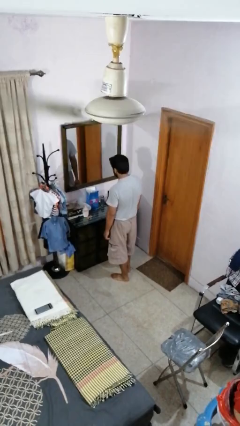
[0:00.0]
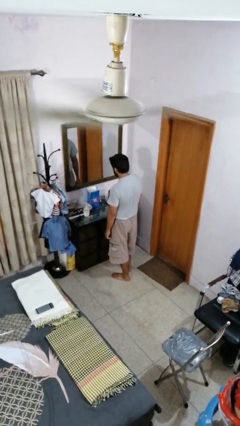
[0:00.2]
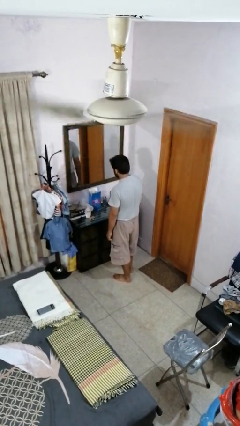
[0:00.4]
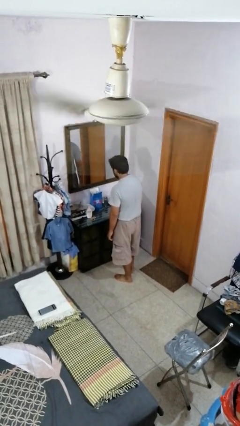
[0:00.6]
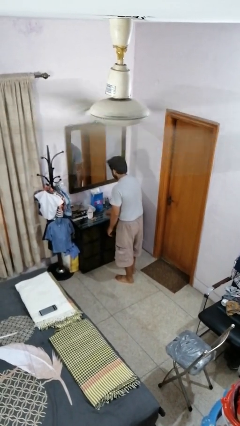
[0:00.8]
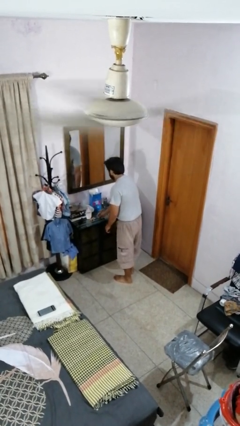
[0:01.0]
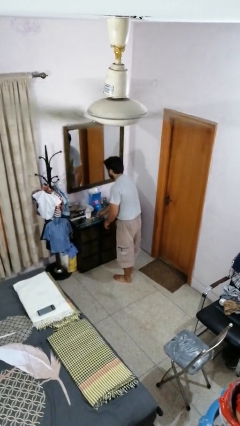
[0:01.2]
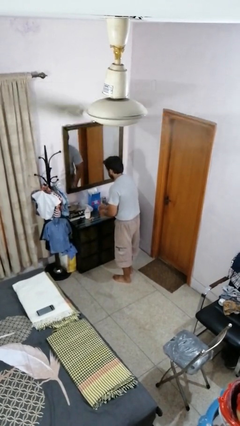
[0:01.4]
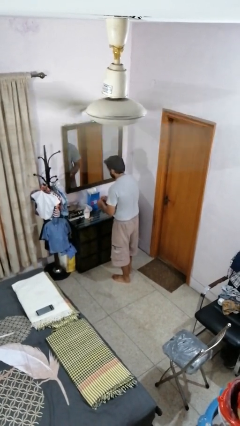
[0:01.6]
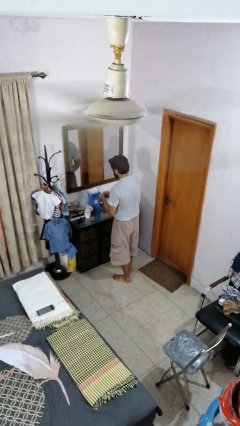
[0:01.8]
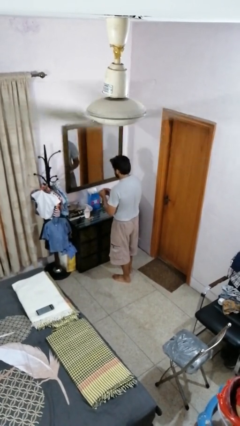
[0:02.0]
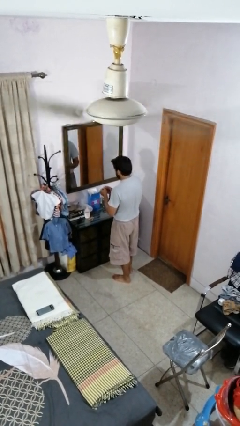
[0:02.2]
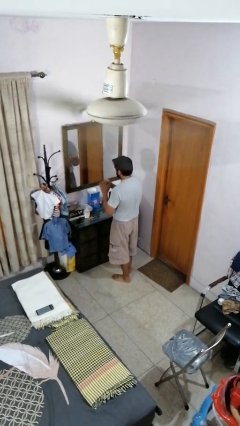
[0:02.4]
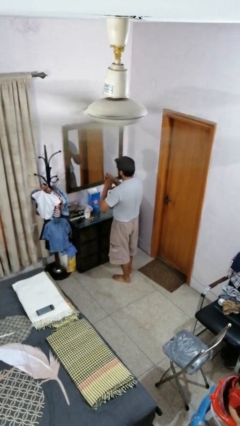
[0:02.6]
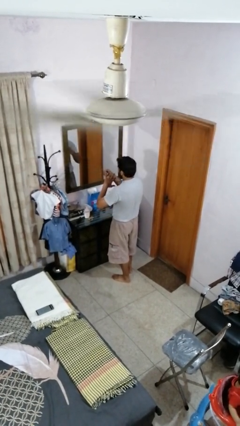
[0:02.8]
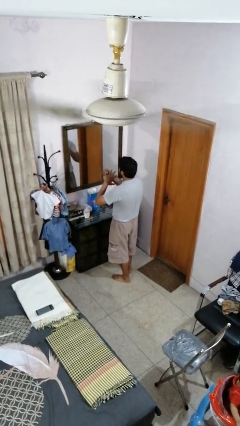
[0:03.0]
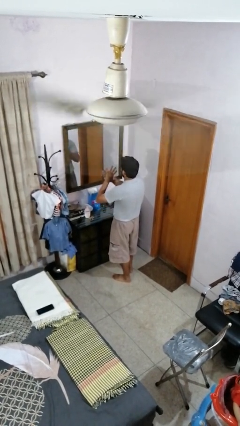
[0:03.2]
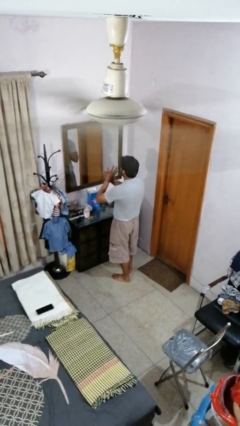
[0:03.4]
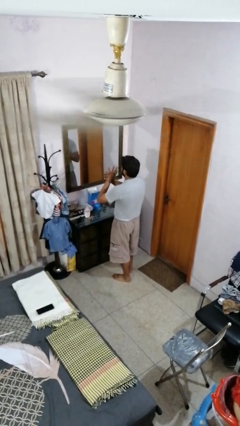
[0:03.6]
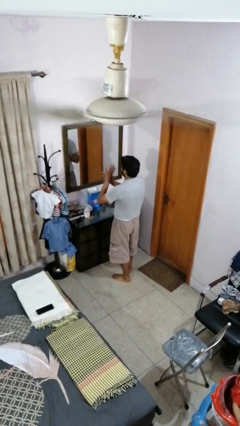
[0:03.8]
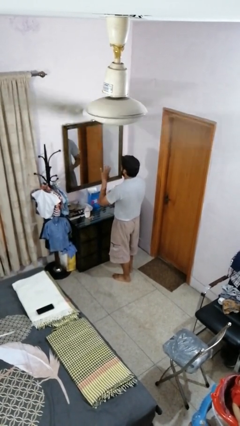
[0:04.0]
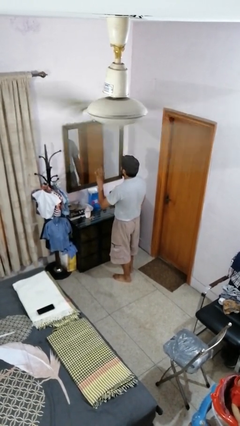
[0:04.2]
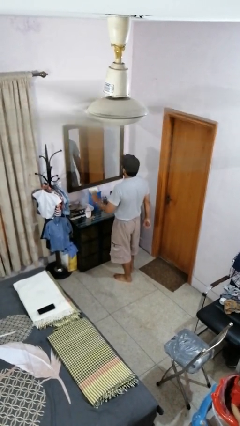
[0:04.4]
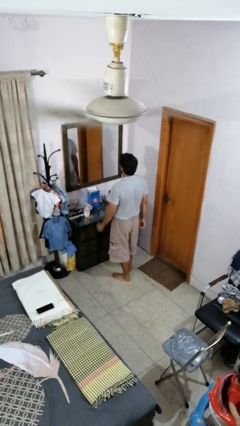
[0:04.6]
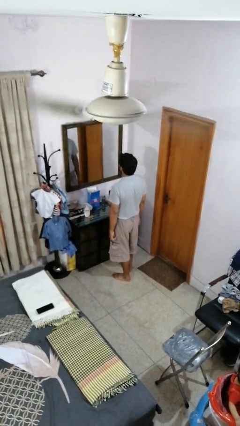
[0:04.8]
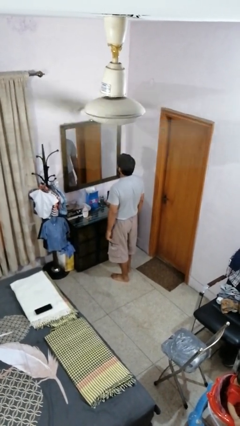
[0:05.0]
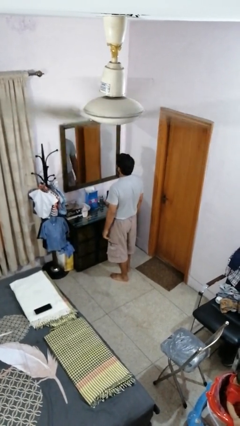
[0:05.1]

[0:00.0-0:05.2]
person puts on ring

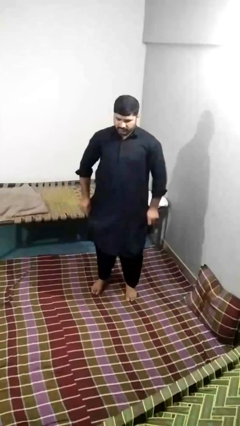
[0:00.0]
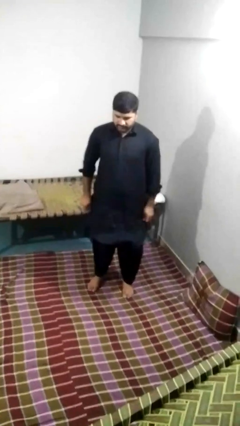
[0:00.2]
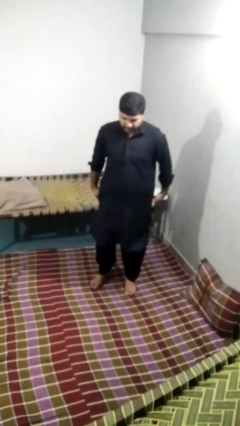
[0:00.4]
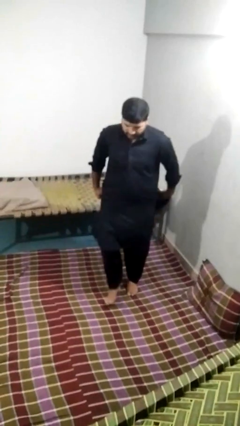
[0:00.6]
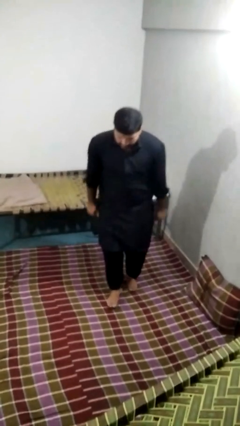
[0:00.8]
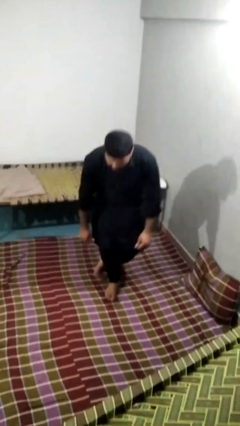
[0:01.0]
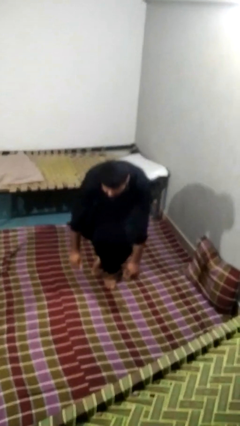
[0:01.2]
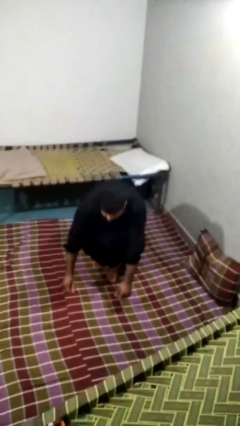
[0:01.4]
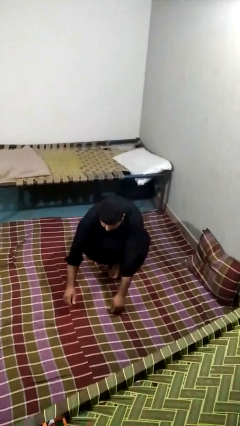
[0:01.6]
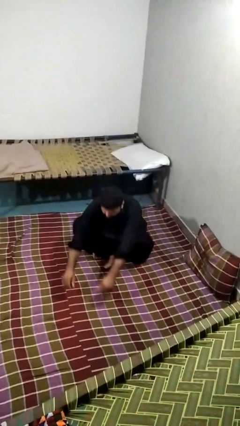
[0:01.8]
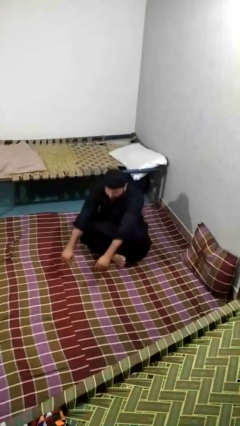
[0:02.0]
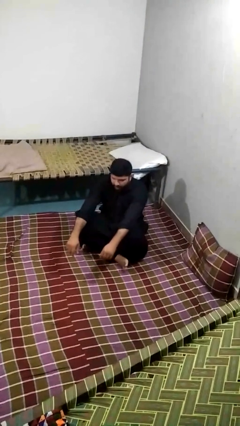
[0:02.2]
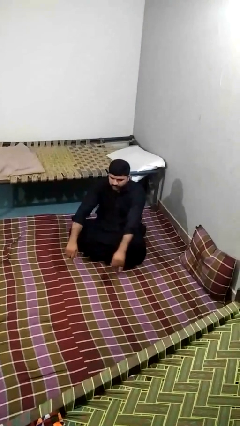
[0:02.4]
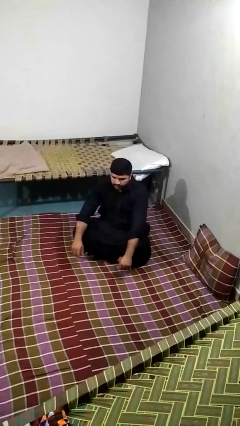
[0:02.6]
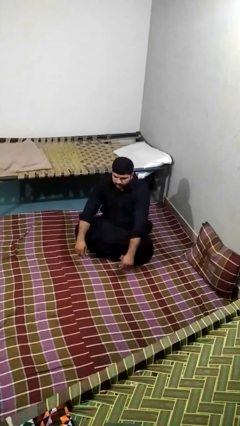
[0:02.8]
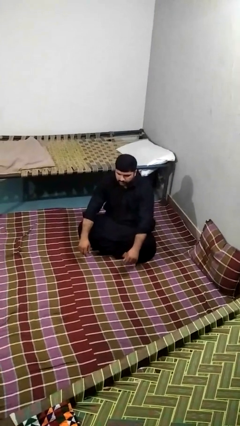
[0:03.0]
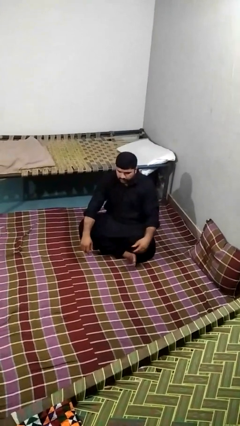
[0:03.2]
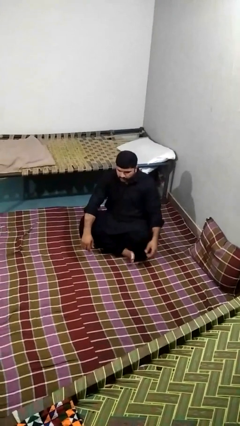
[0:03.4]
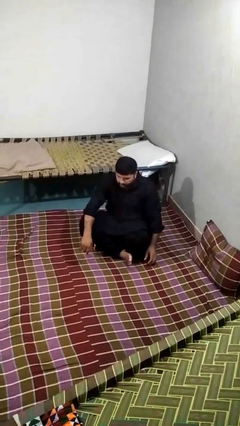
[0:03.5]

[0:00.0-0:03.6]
person sits crisscross

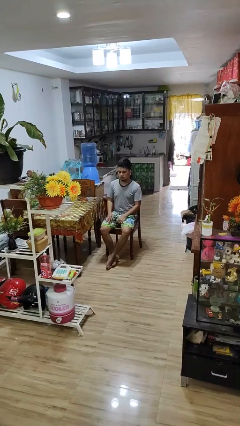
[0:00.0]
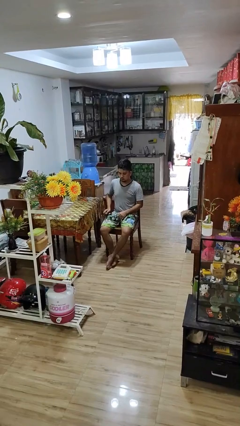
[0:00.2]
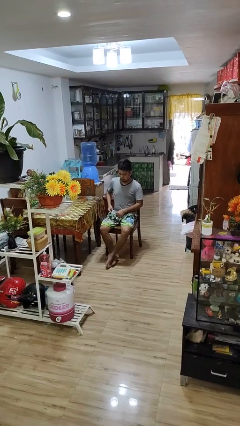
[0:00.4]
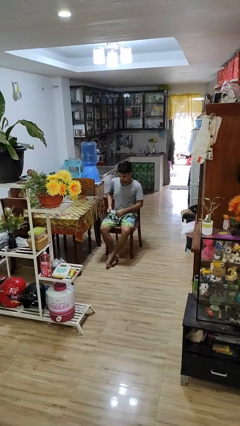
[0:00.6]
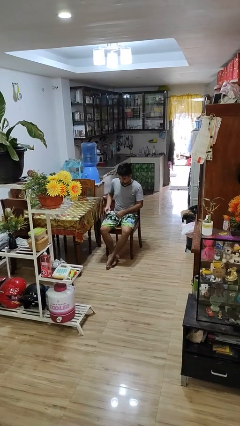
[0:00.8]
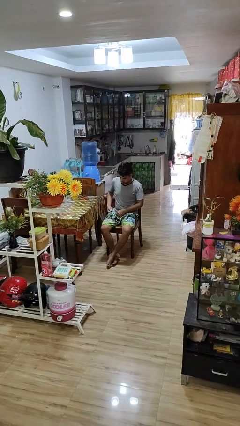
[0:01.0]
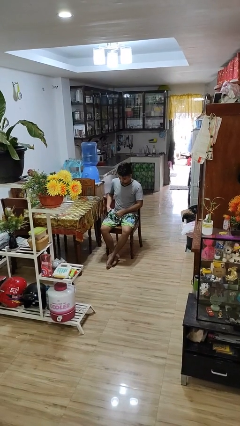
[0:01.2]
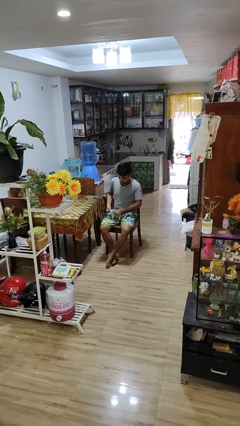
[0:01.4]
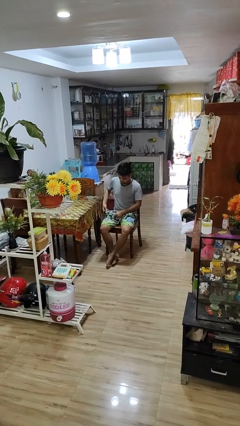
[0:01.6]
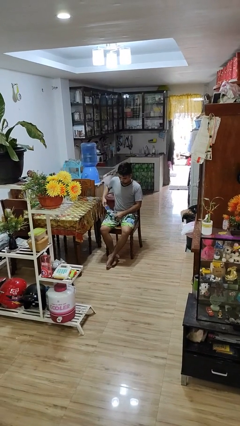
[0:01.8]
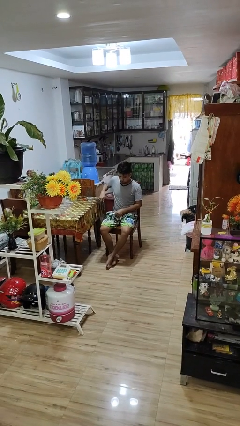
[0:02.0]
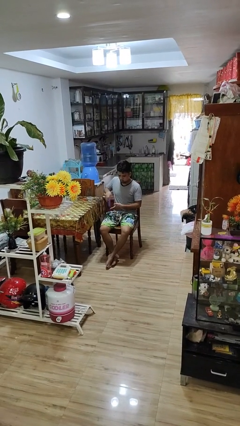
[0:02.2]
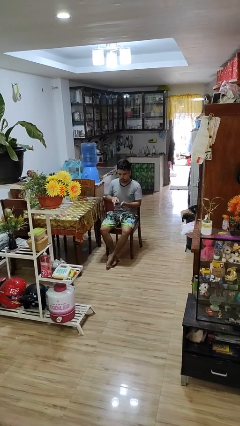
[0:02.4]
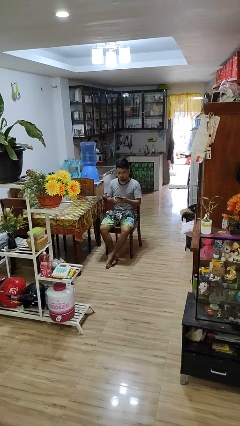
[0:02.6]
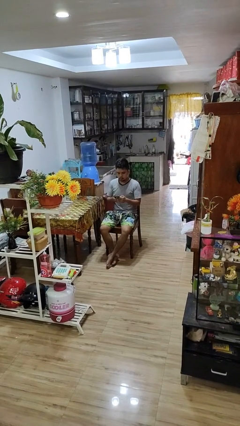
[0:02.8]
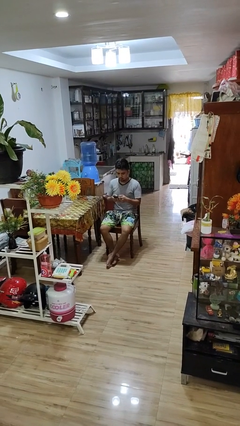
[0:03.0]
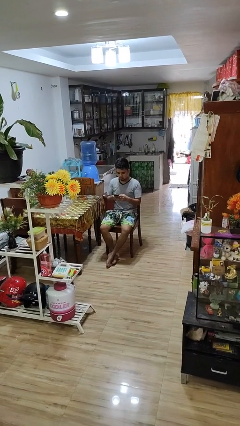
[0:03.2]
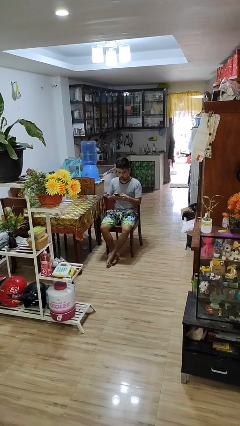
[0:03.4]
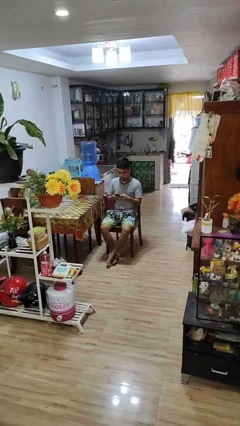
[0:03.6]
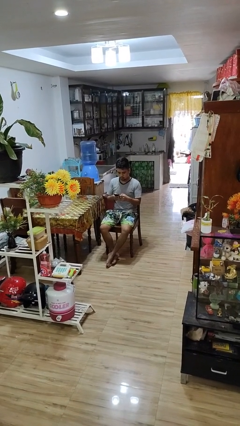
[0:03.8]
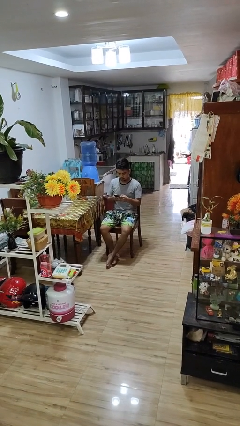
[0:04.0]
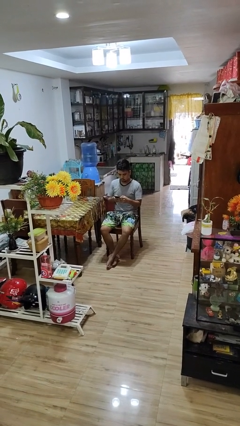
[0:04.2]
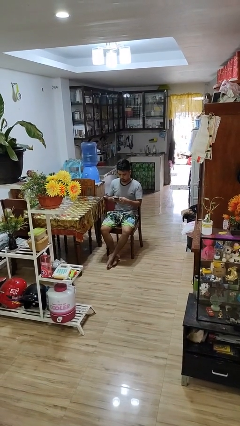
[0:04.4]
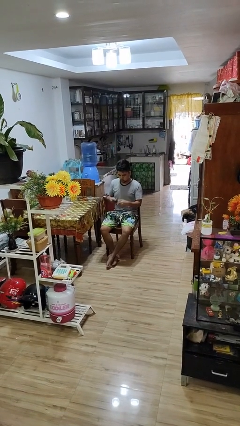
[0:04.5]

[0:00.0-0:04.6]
person takes phone from pocket

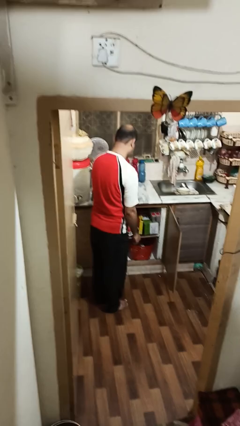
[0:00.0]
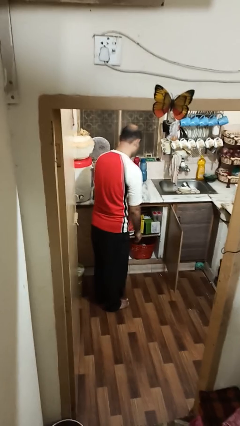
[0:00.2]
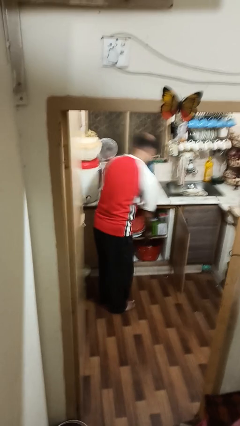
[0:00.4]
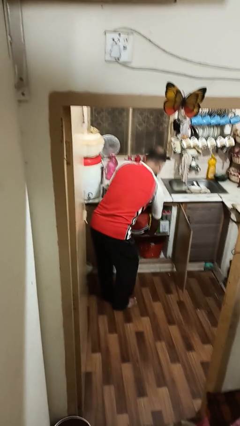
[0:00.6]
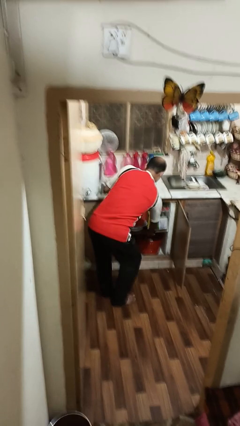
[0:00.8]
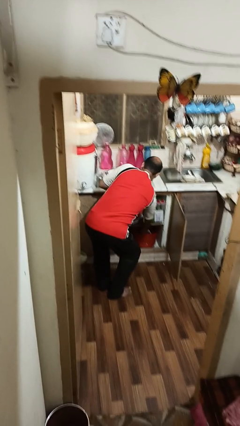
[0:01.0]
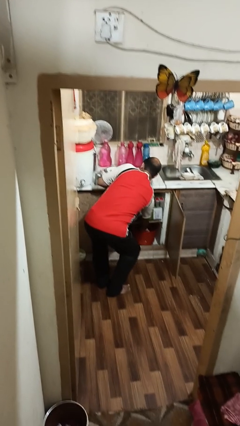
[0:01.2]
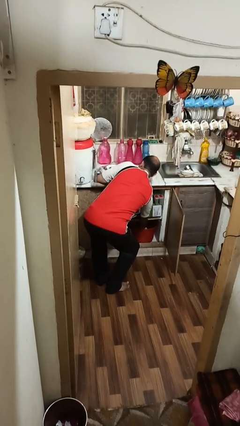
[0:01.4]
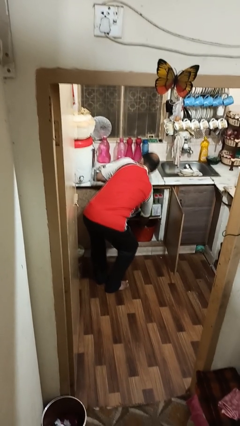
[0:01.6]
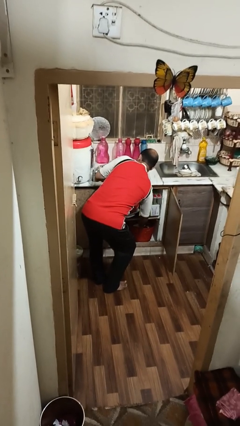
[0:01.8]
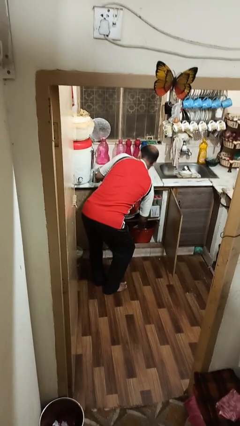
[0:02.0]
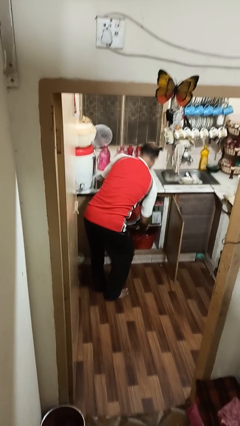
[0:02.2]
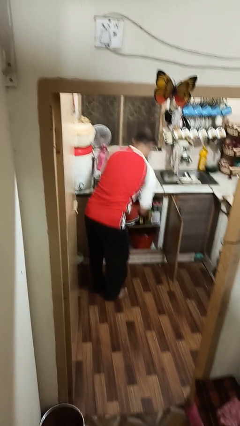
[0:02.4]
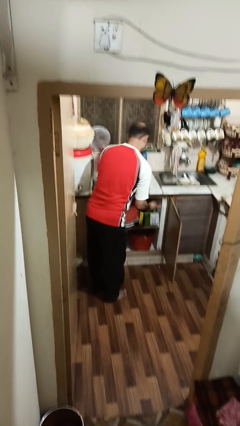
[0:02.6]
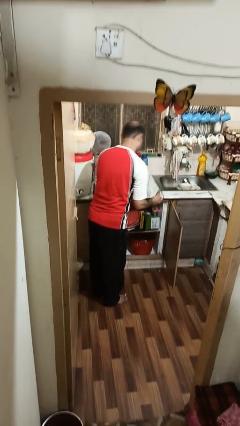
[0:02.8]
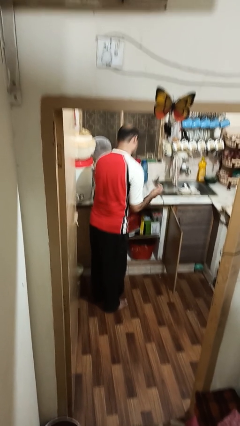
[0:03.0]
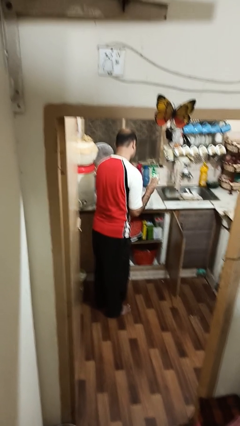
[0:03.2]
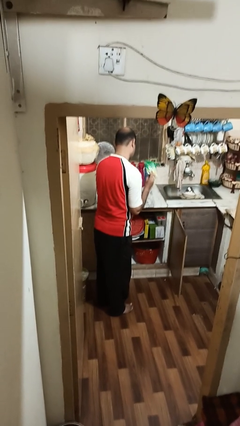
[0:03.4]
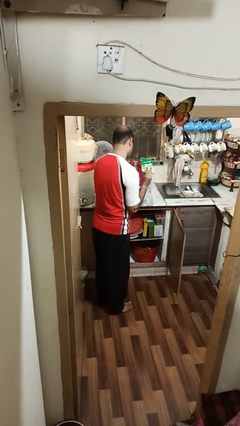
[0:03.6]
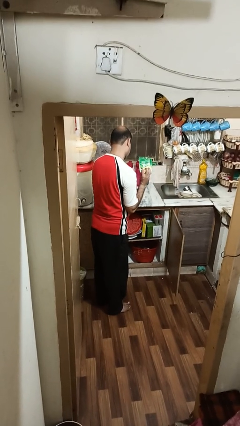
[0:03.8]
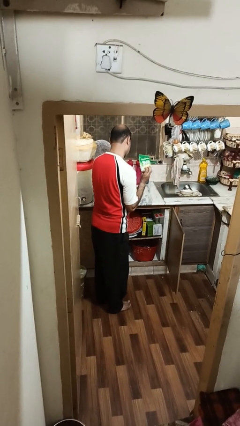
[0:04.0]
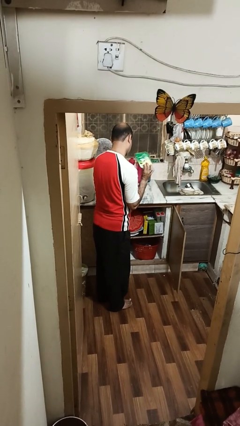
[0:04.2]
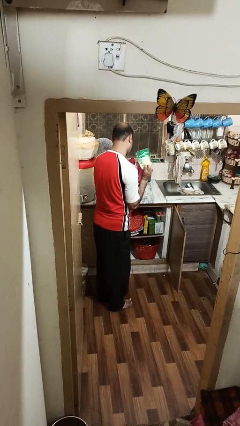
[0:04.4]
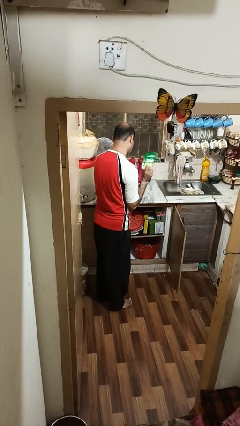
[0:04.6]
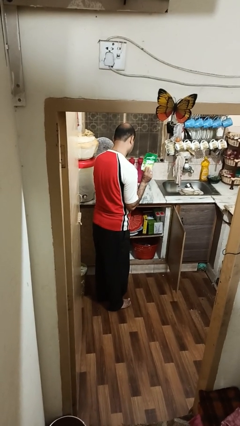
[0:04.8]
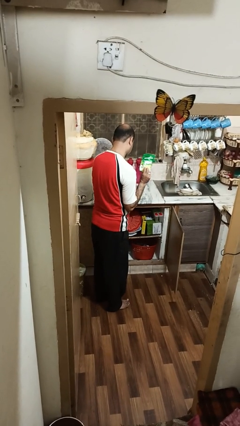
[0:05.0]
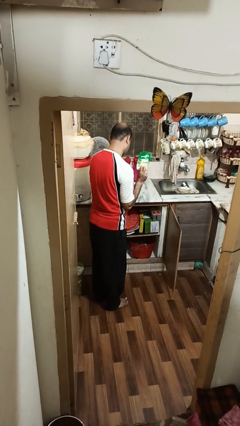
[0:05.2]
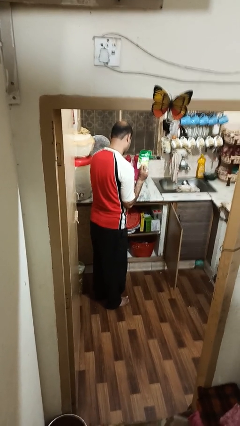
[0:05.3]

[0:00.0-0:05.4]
person takes object from cabinet
